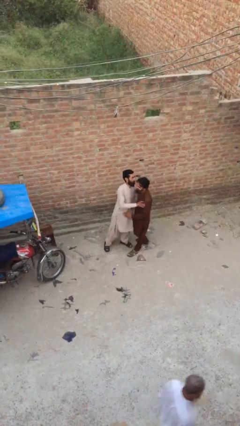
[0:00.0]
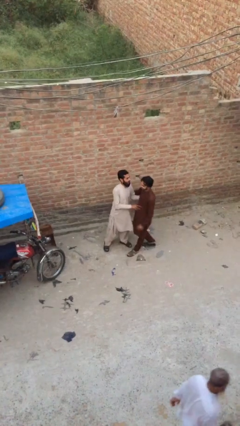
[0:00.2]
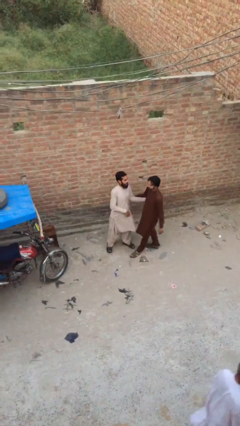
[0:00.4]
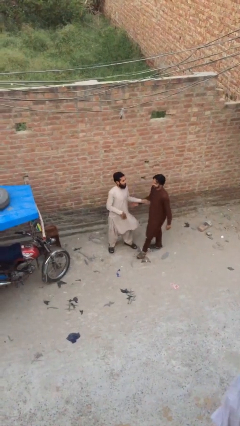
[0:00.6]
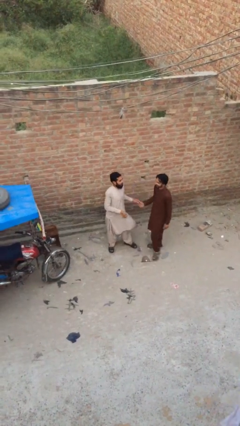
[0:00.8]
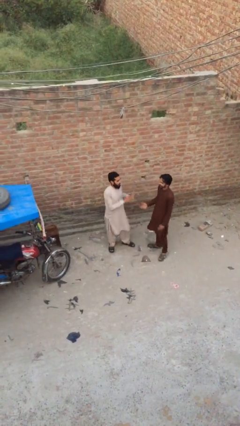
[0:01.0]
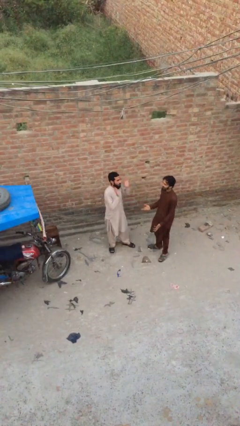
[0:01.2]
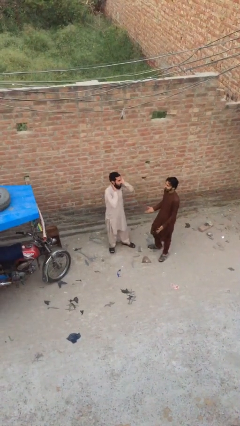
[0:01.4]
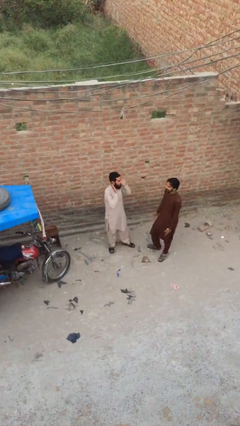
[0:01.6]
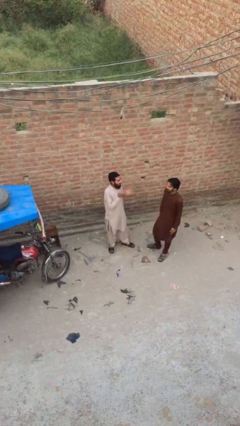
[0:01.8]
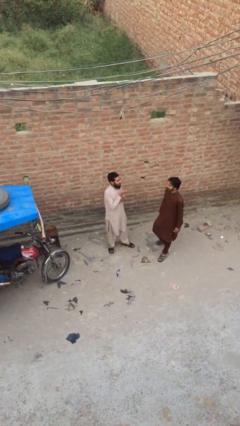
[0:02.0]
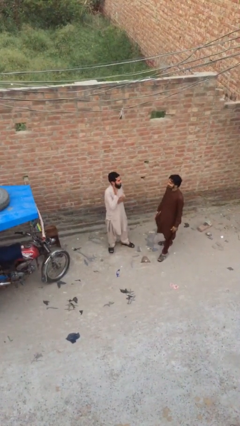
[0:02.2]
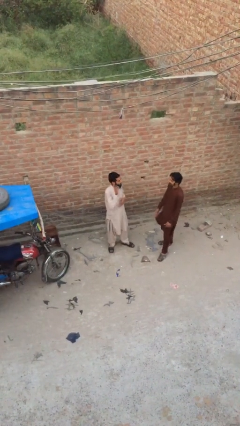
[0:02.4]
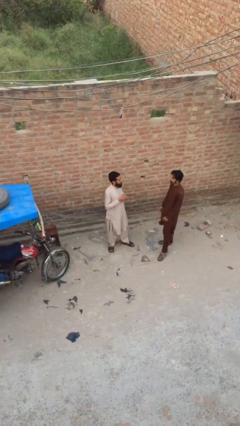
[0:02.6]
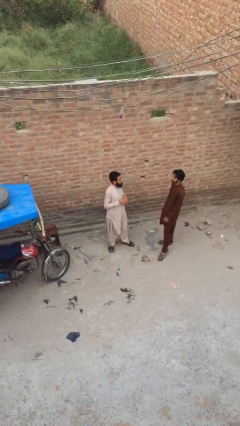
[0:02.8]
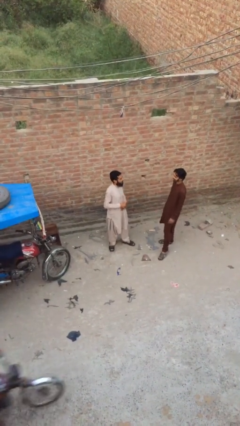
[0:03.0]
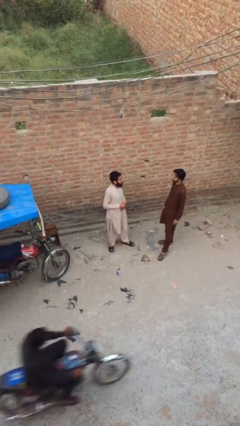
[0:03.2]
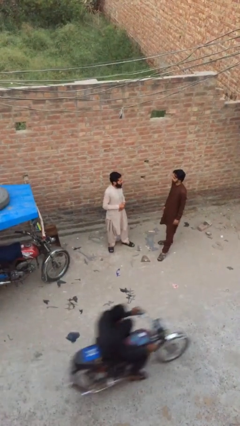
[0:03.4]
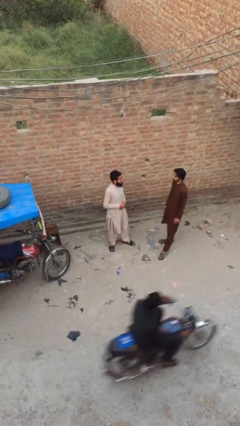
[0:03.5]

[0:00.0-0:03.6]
person talks to person

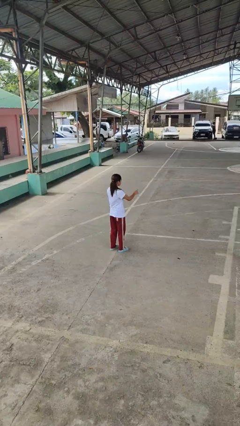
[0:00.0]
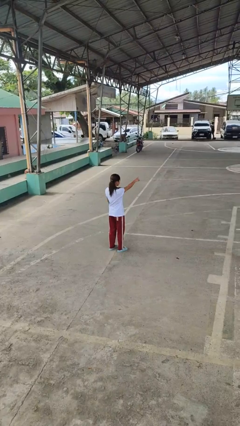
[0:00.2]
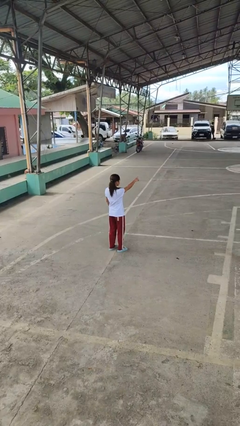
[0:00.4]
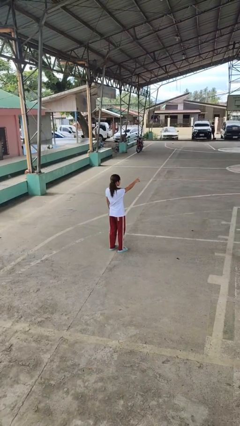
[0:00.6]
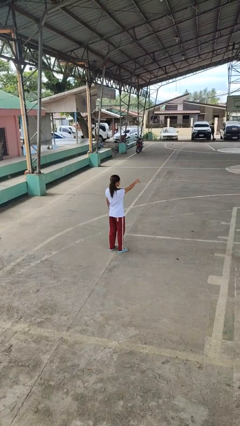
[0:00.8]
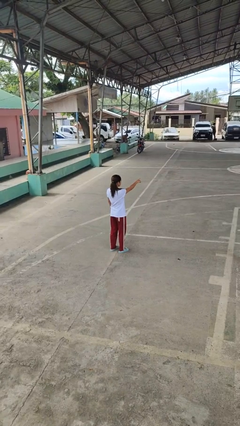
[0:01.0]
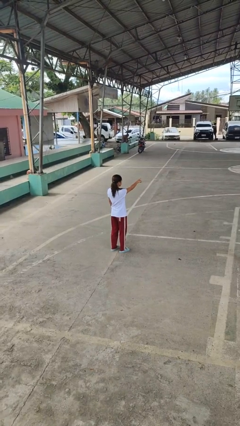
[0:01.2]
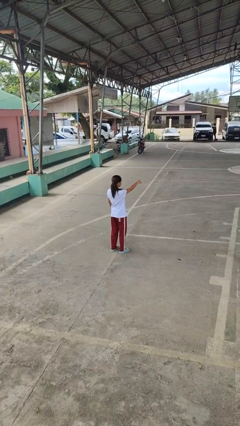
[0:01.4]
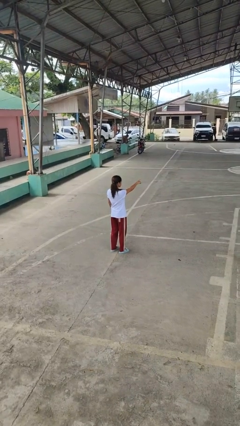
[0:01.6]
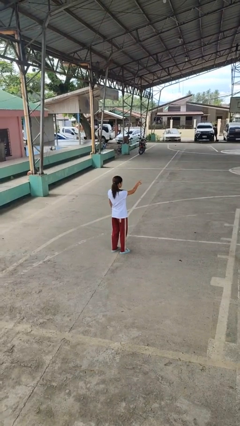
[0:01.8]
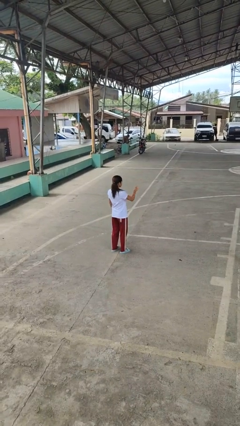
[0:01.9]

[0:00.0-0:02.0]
person points at person

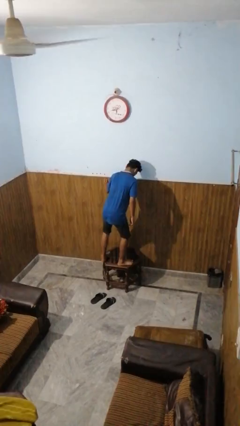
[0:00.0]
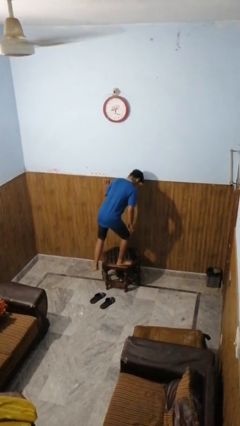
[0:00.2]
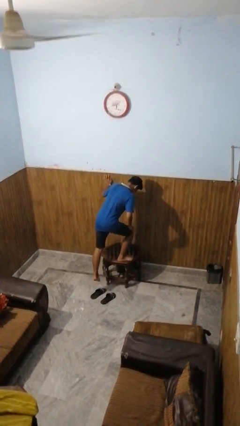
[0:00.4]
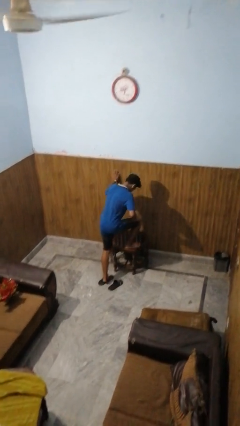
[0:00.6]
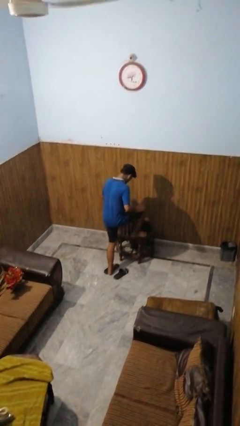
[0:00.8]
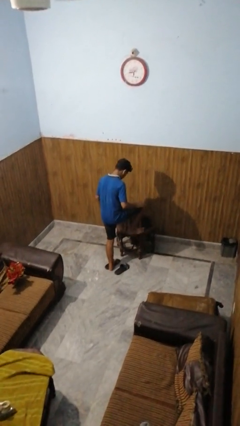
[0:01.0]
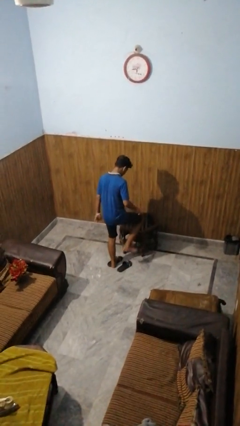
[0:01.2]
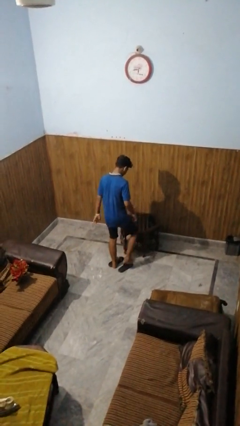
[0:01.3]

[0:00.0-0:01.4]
person climbs off table

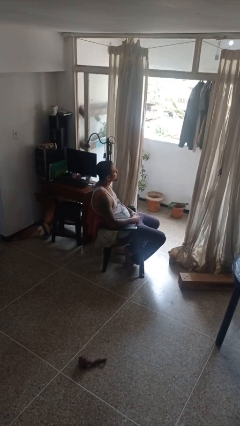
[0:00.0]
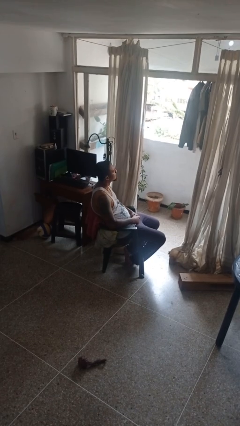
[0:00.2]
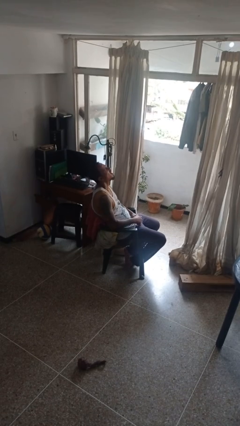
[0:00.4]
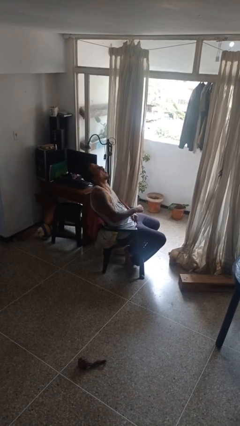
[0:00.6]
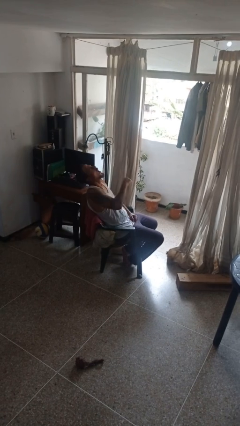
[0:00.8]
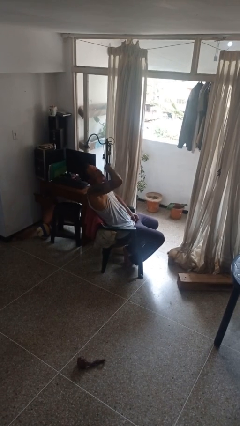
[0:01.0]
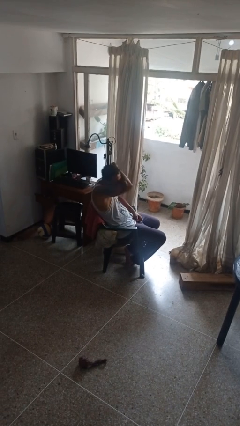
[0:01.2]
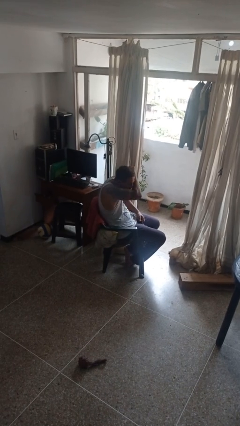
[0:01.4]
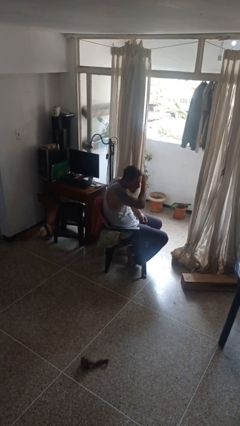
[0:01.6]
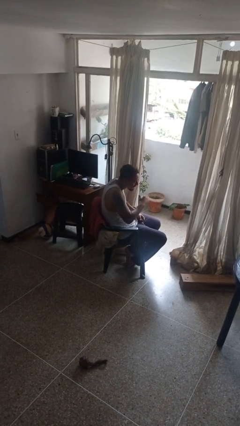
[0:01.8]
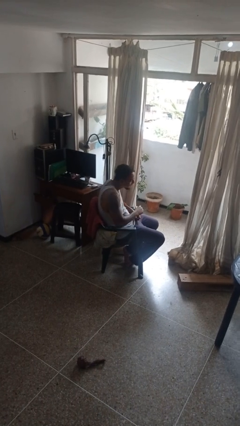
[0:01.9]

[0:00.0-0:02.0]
person sneezes into arm

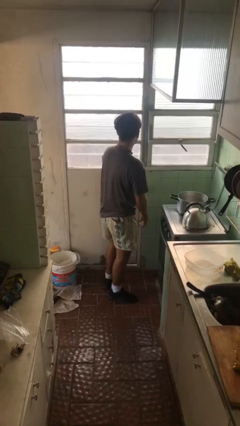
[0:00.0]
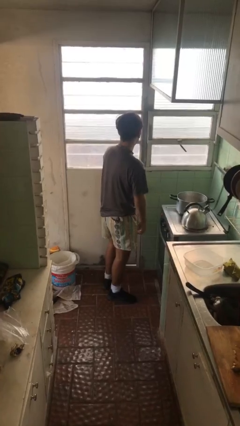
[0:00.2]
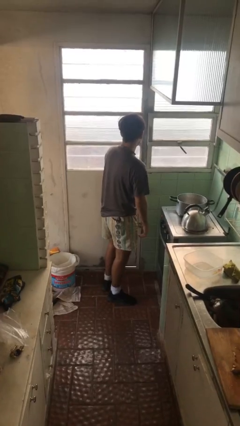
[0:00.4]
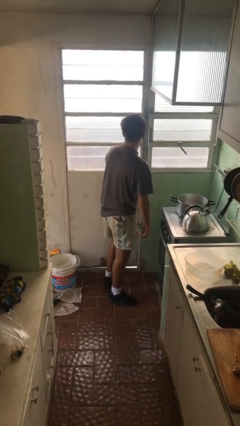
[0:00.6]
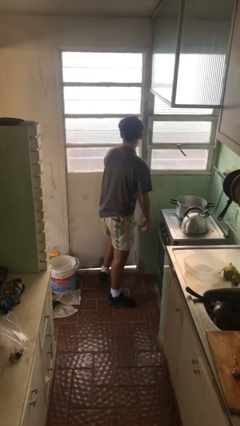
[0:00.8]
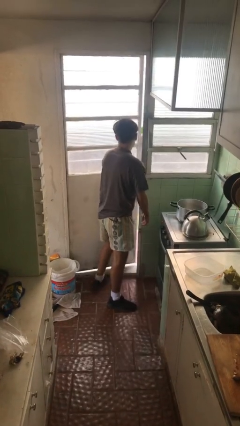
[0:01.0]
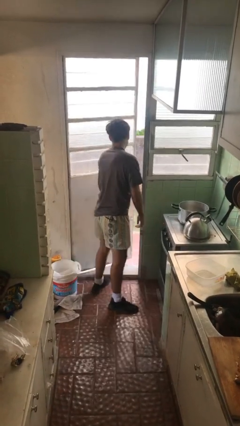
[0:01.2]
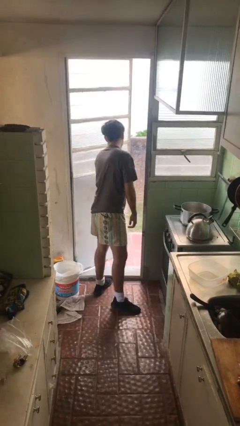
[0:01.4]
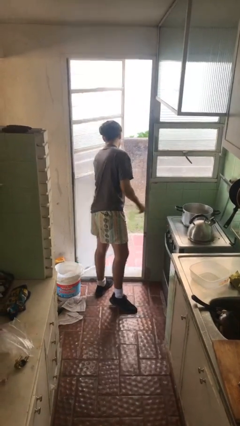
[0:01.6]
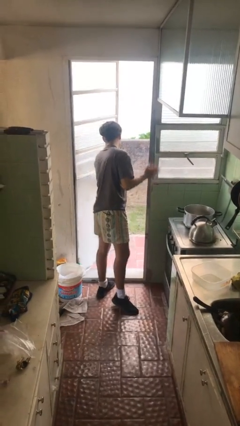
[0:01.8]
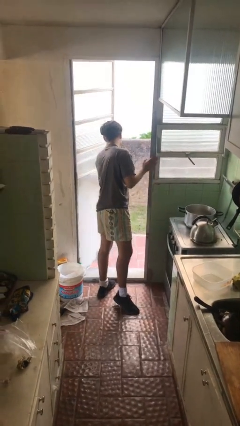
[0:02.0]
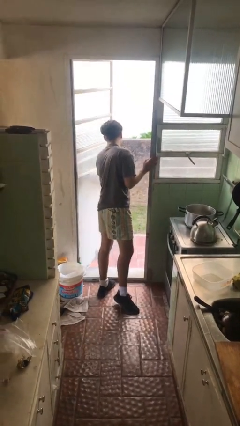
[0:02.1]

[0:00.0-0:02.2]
person opens facility door

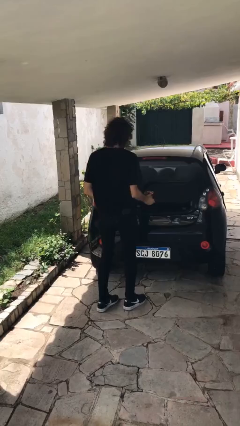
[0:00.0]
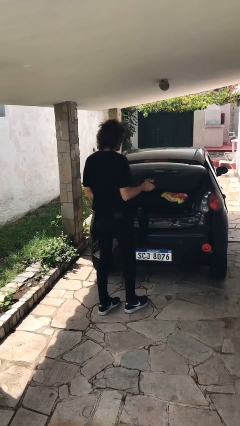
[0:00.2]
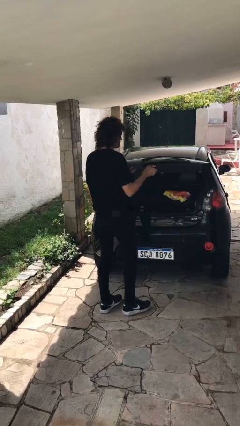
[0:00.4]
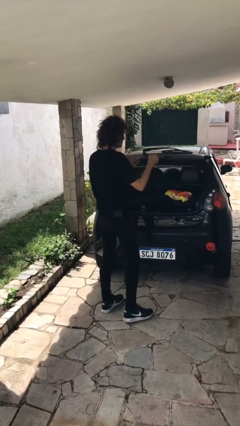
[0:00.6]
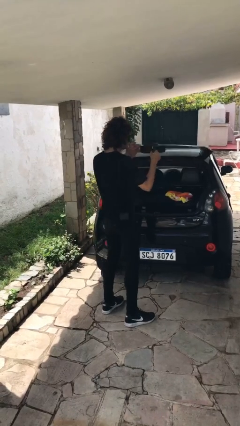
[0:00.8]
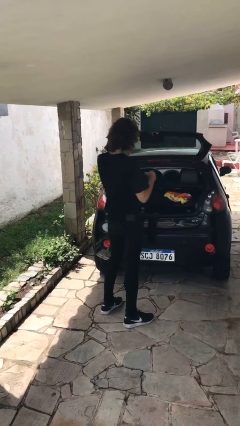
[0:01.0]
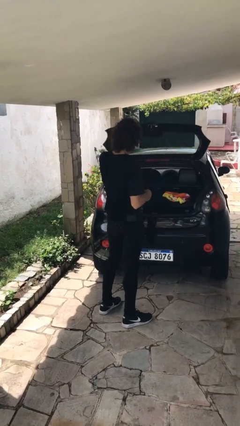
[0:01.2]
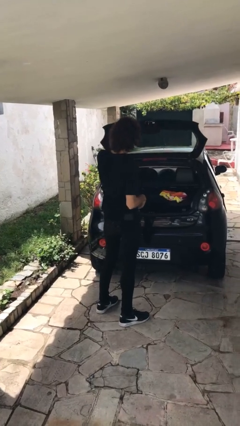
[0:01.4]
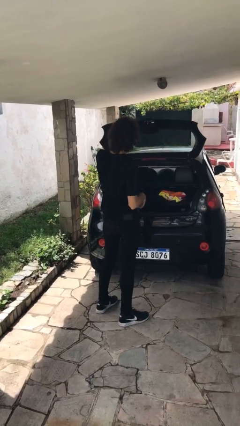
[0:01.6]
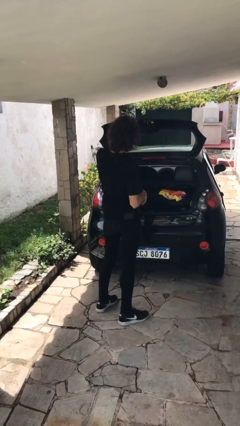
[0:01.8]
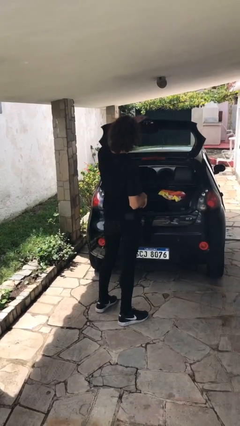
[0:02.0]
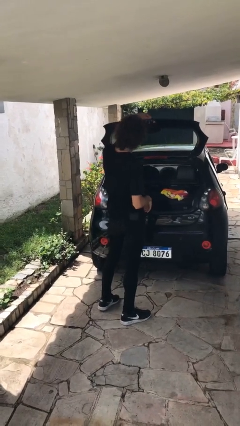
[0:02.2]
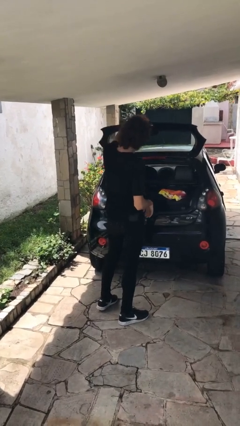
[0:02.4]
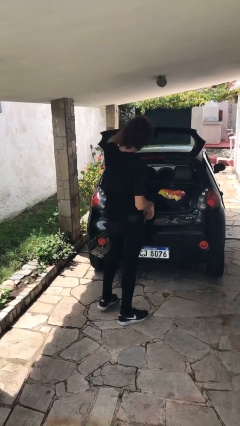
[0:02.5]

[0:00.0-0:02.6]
person opens car trunk

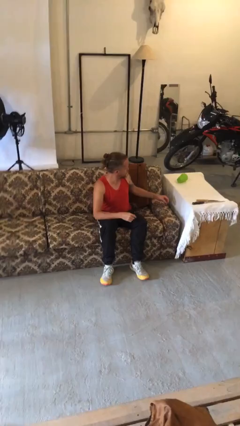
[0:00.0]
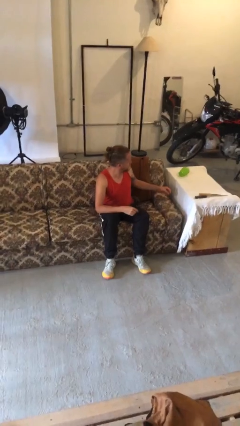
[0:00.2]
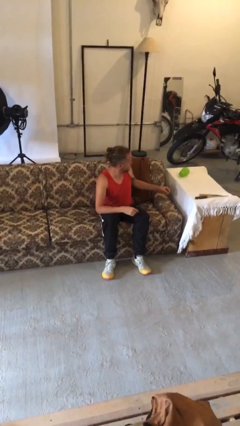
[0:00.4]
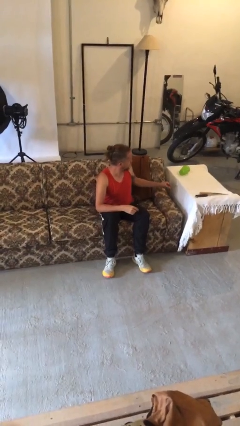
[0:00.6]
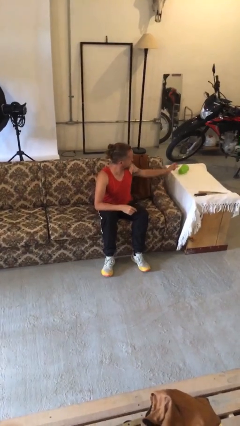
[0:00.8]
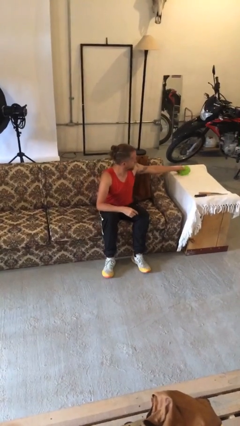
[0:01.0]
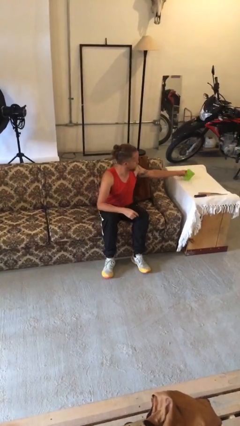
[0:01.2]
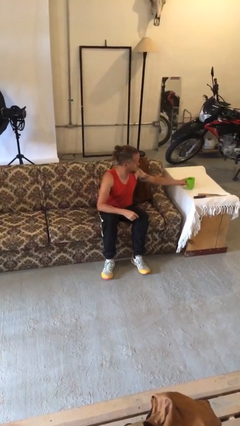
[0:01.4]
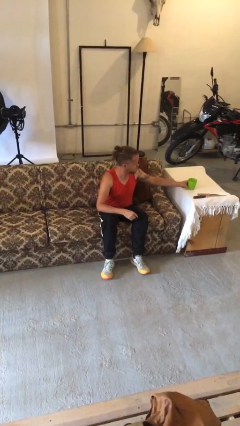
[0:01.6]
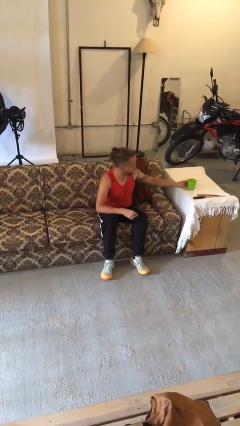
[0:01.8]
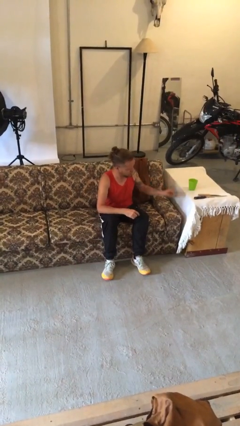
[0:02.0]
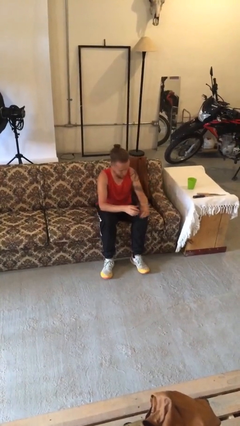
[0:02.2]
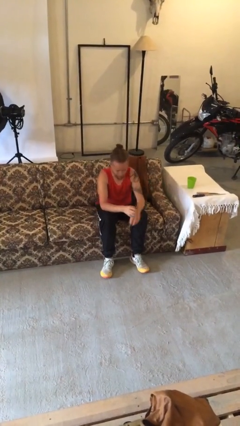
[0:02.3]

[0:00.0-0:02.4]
person sets upright glass

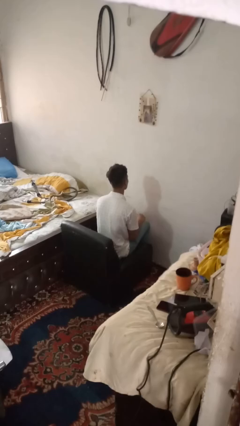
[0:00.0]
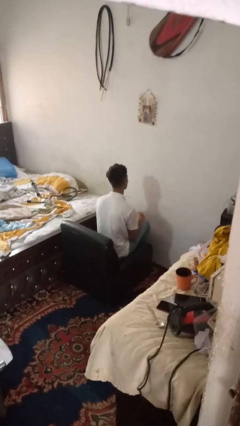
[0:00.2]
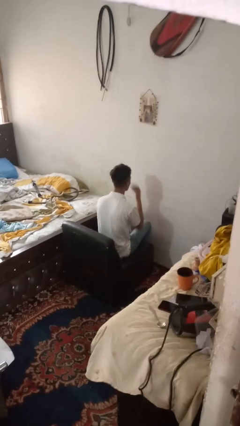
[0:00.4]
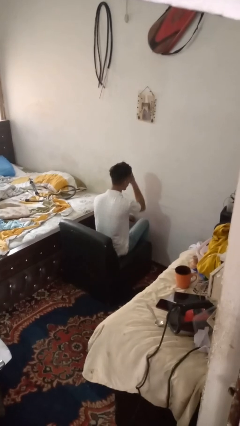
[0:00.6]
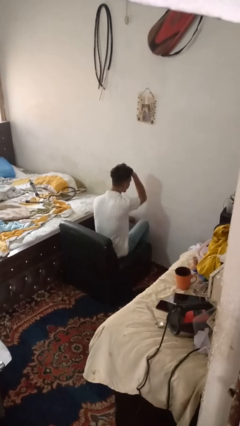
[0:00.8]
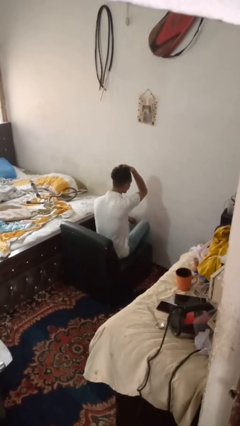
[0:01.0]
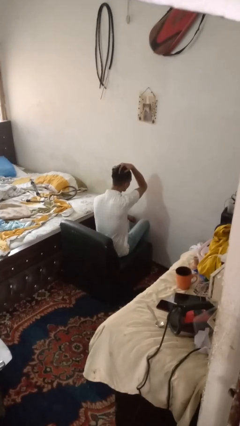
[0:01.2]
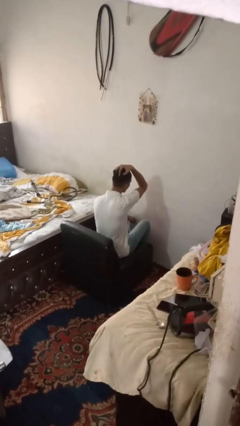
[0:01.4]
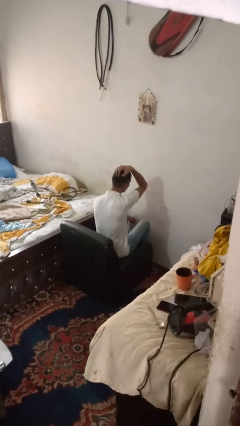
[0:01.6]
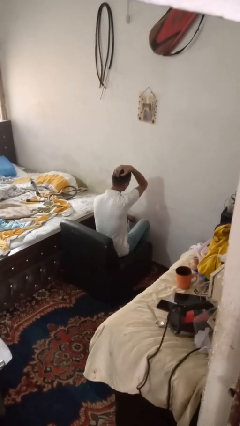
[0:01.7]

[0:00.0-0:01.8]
person strokes hair